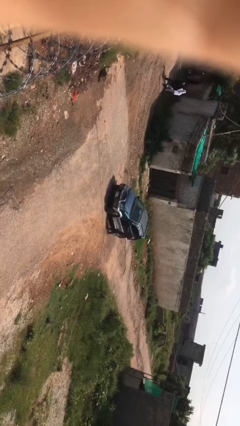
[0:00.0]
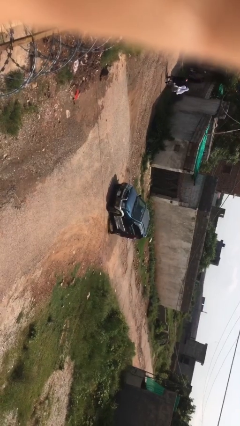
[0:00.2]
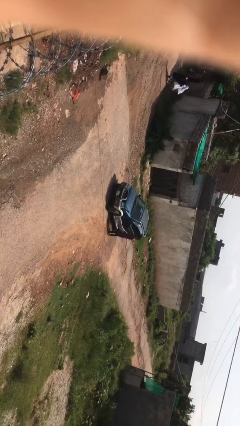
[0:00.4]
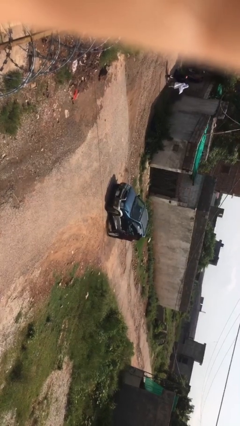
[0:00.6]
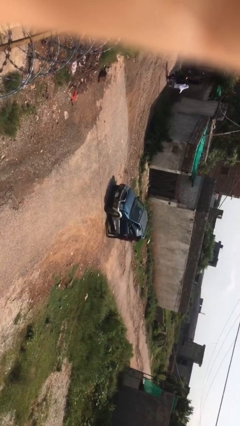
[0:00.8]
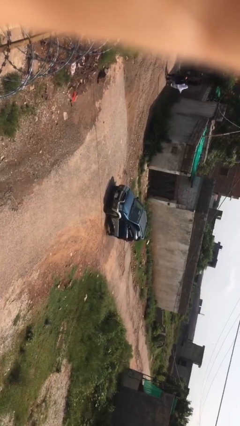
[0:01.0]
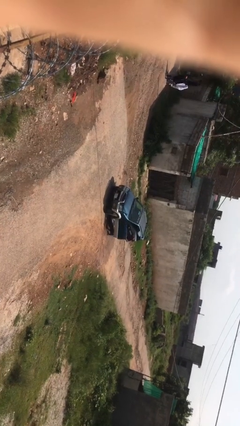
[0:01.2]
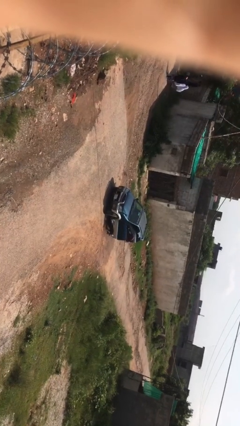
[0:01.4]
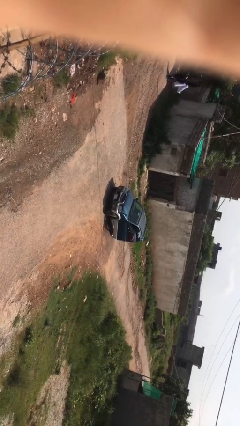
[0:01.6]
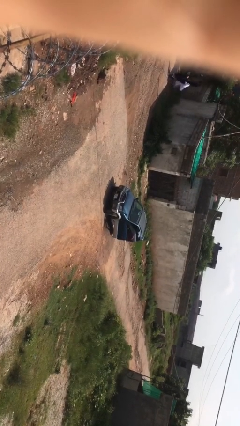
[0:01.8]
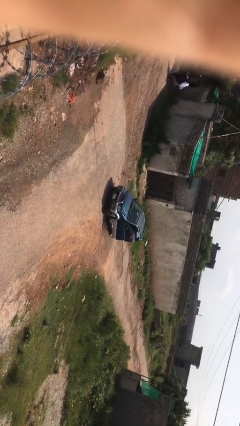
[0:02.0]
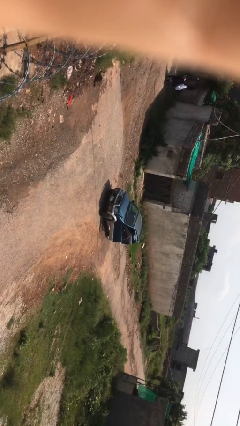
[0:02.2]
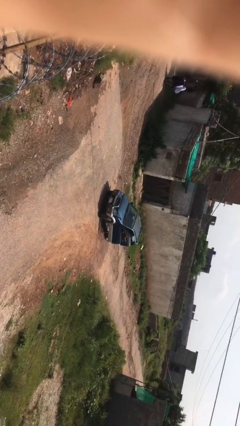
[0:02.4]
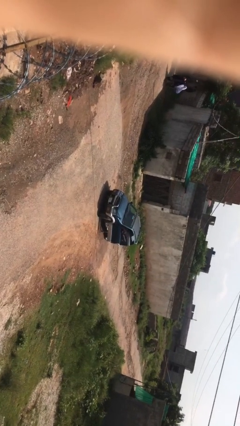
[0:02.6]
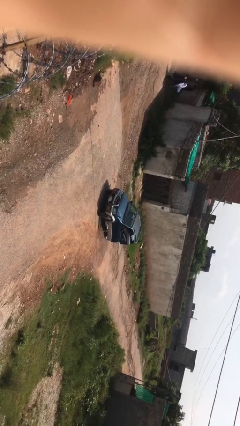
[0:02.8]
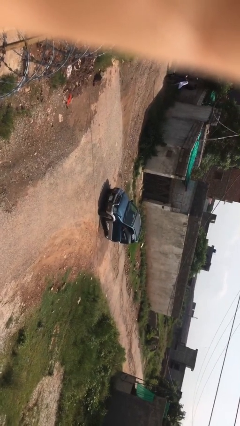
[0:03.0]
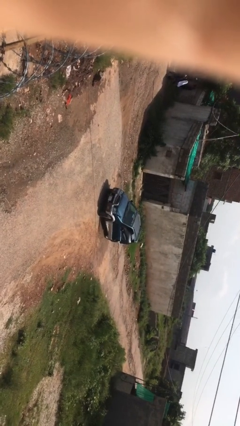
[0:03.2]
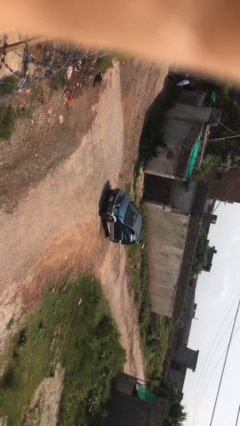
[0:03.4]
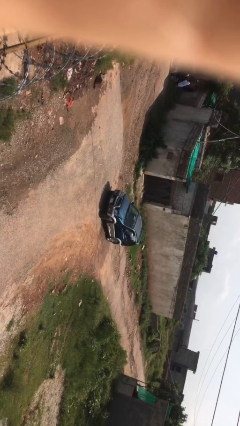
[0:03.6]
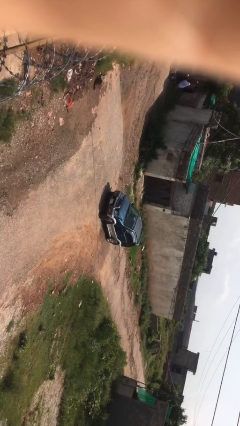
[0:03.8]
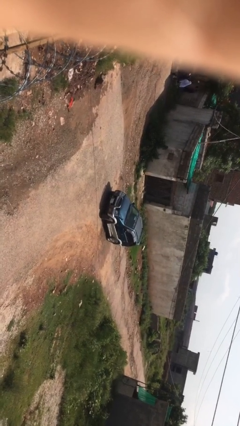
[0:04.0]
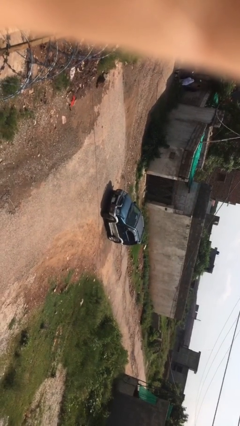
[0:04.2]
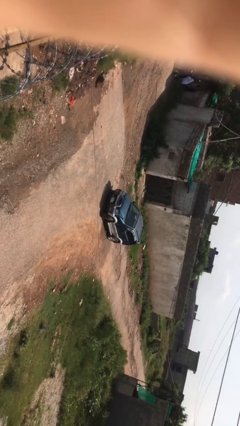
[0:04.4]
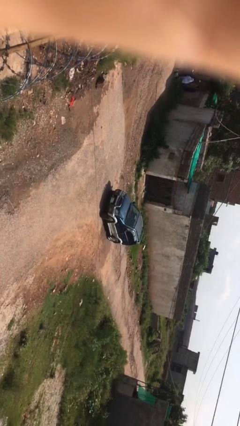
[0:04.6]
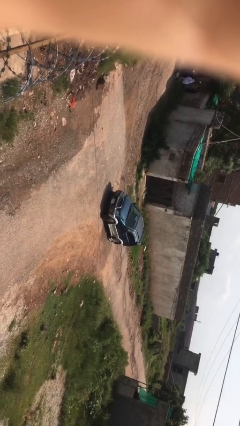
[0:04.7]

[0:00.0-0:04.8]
car picks up person

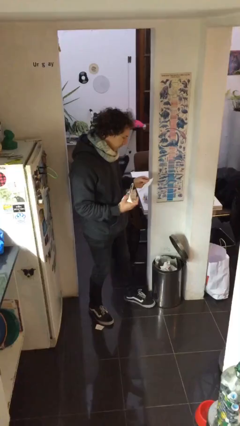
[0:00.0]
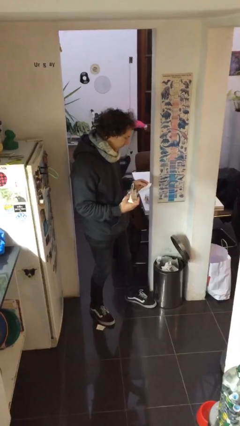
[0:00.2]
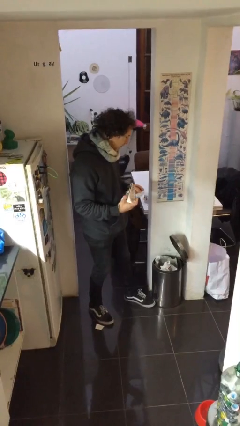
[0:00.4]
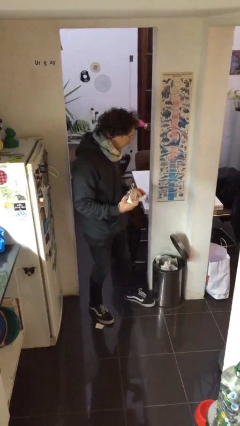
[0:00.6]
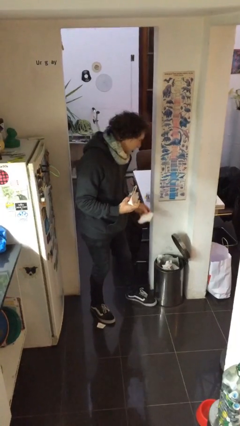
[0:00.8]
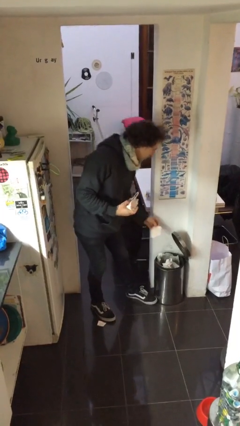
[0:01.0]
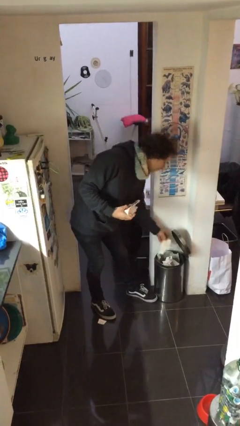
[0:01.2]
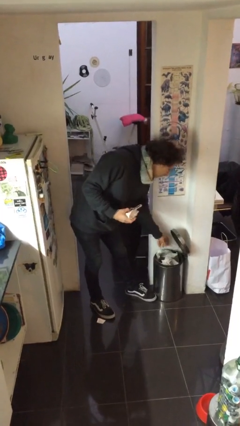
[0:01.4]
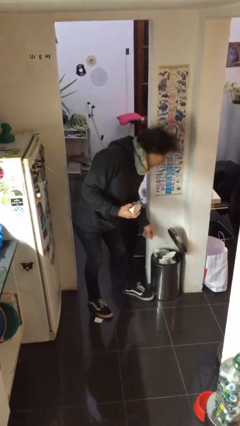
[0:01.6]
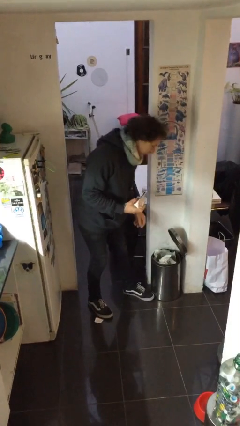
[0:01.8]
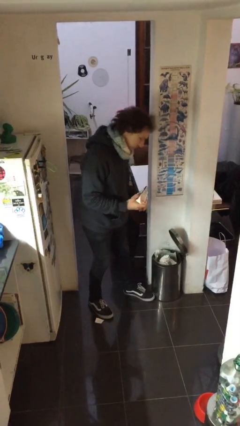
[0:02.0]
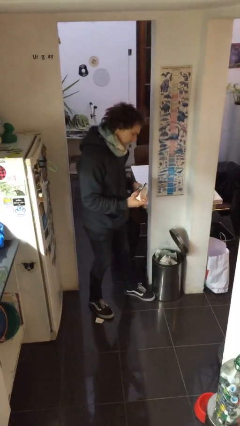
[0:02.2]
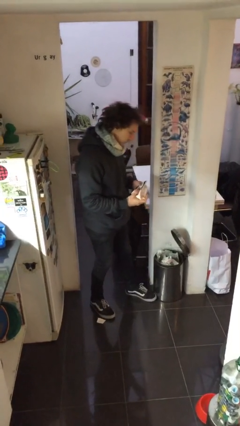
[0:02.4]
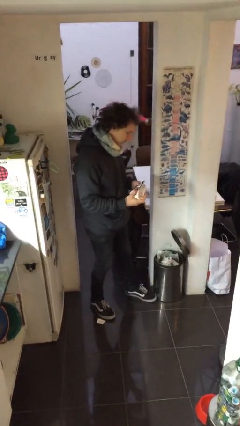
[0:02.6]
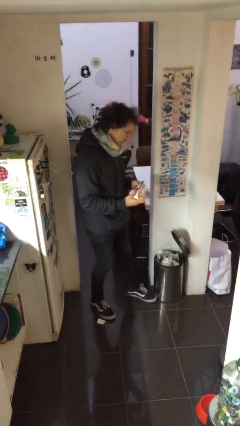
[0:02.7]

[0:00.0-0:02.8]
person discards trash

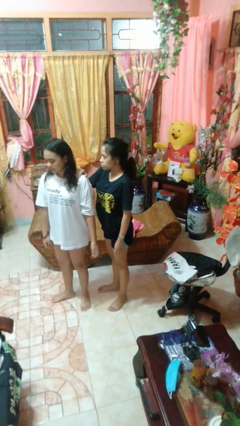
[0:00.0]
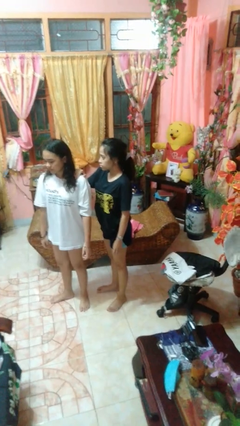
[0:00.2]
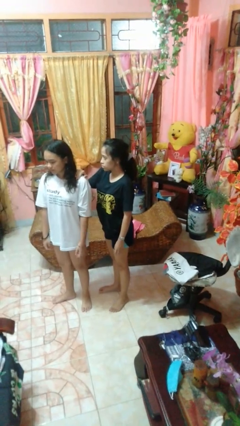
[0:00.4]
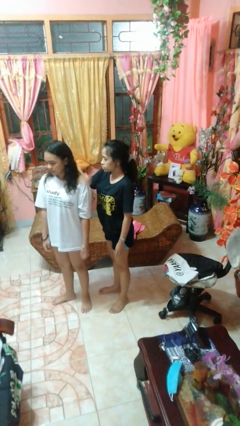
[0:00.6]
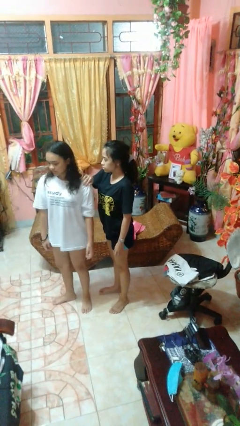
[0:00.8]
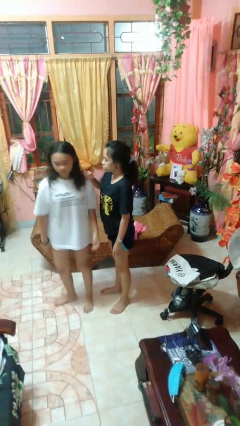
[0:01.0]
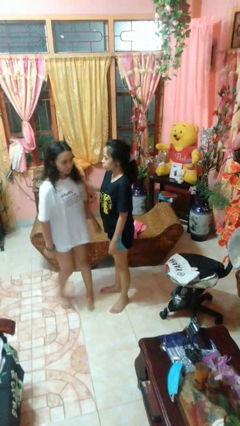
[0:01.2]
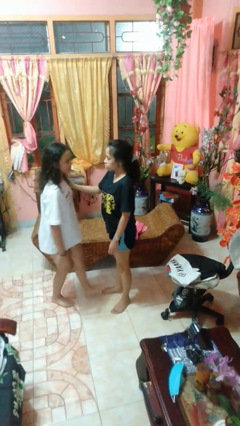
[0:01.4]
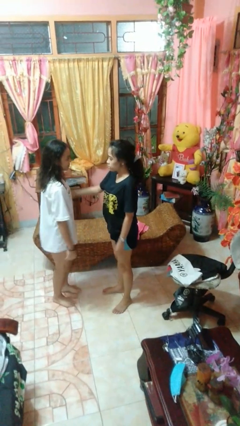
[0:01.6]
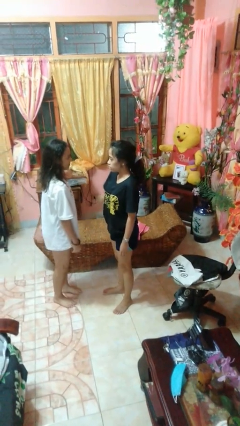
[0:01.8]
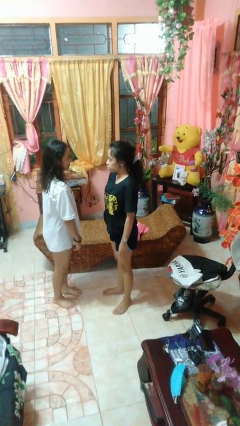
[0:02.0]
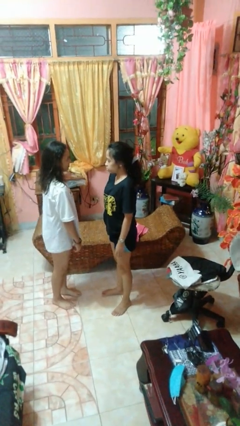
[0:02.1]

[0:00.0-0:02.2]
person spins person around

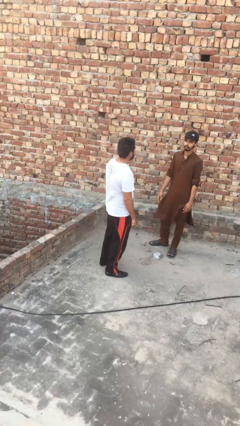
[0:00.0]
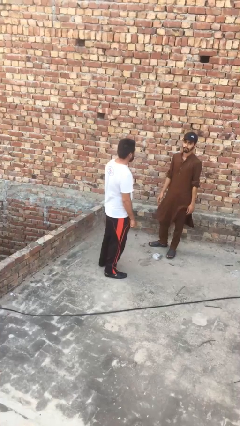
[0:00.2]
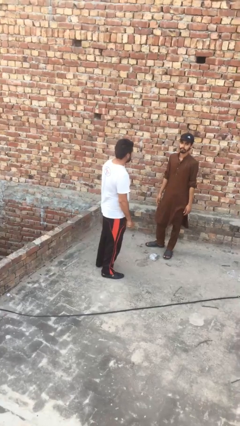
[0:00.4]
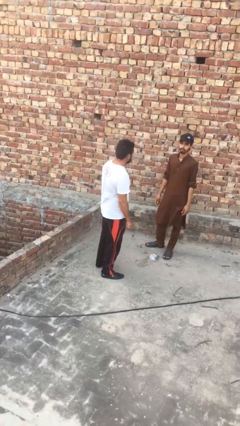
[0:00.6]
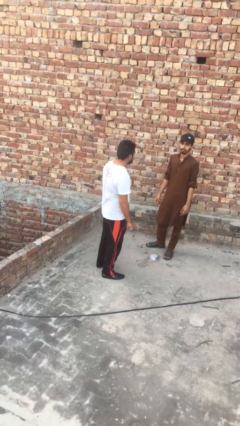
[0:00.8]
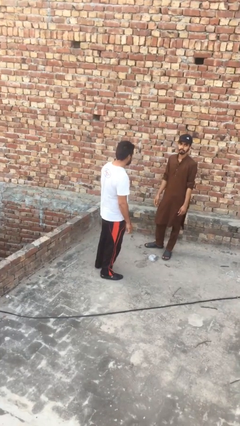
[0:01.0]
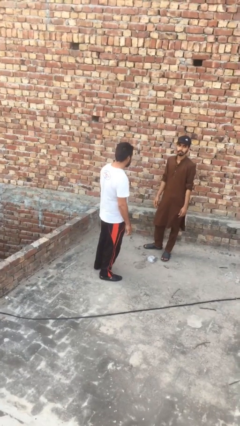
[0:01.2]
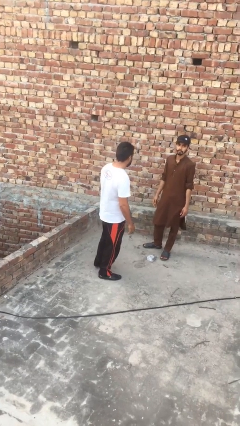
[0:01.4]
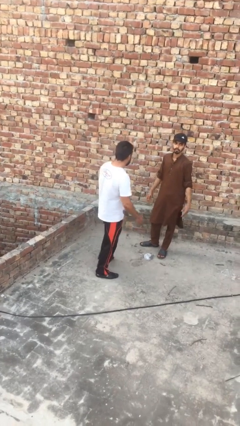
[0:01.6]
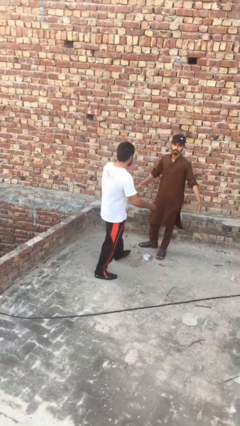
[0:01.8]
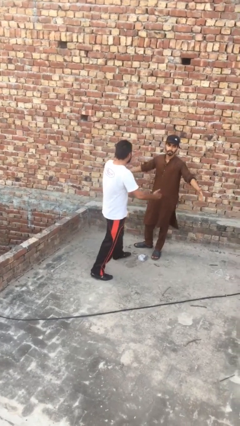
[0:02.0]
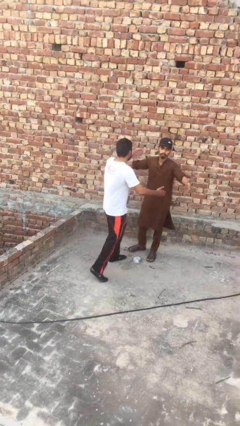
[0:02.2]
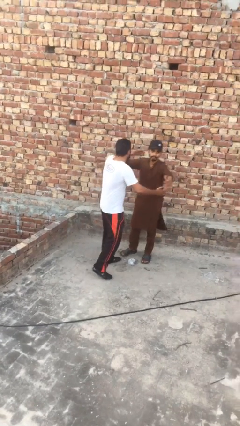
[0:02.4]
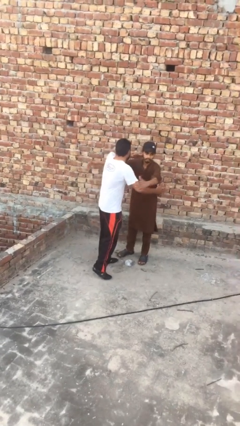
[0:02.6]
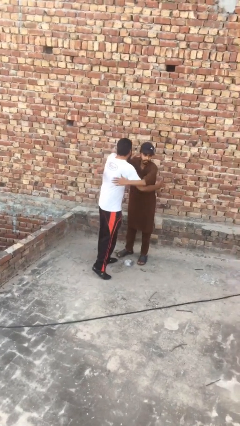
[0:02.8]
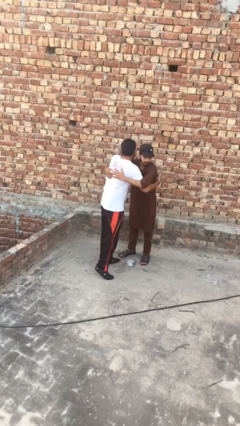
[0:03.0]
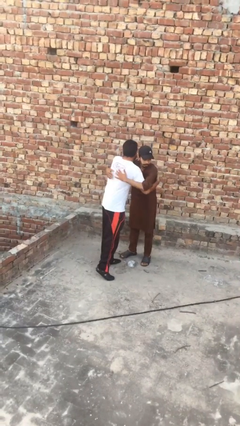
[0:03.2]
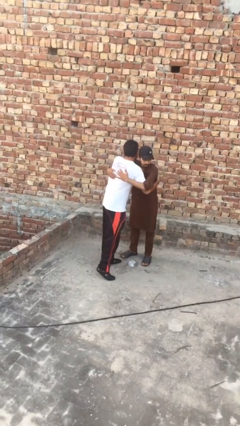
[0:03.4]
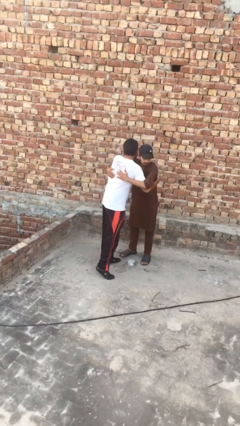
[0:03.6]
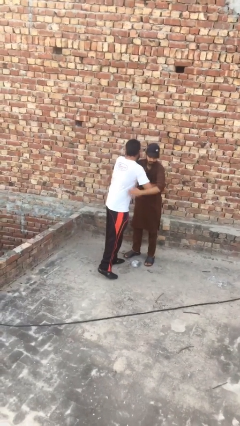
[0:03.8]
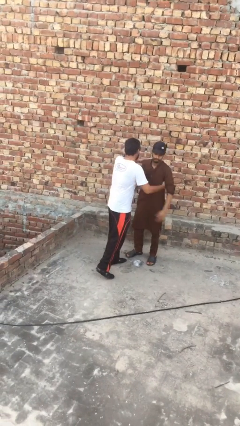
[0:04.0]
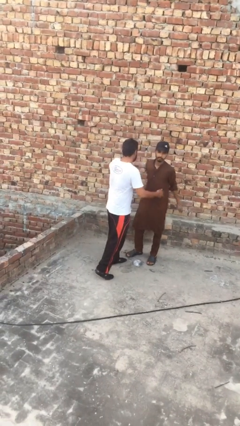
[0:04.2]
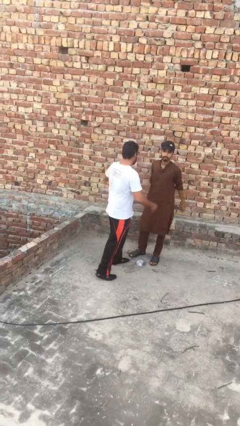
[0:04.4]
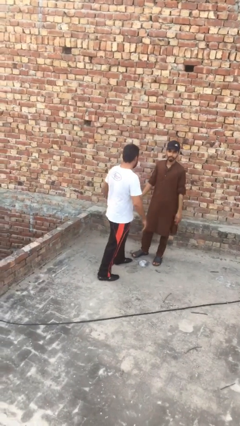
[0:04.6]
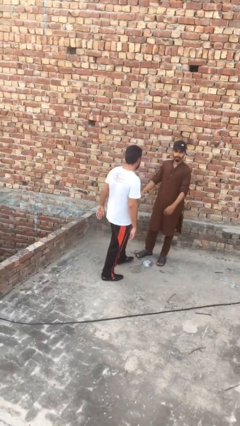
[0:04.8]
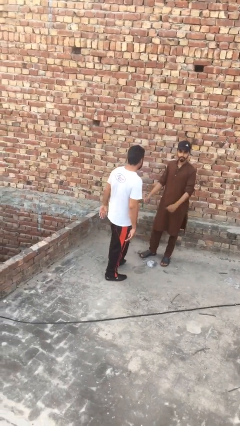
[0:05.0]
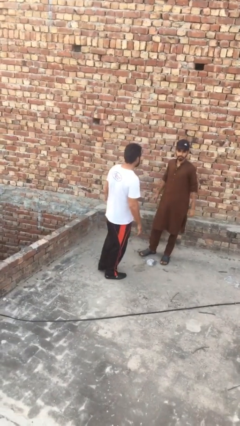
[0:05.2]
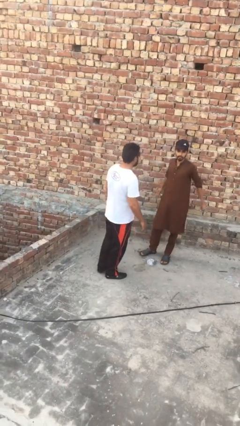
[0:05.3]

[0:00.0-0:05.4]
person embraces person

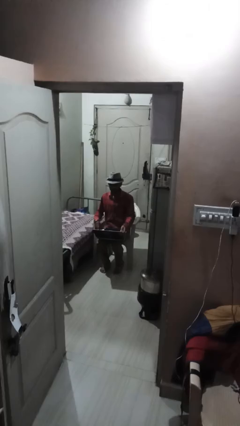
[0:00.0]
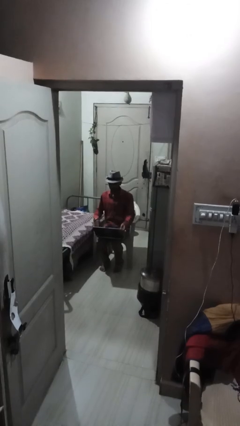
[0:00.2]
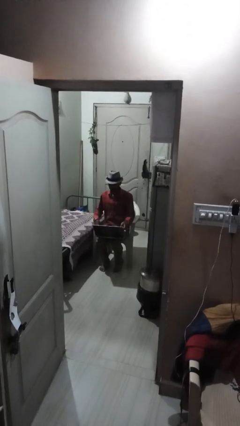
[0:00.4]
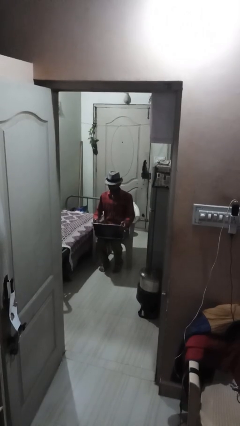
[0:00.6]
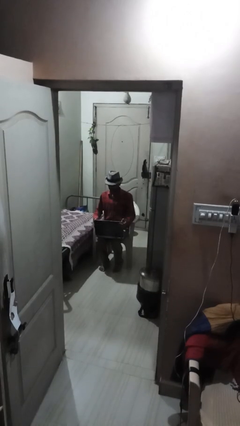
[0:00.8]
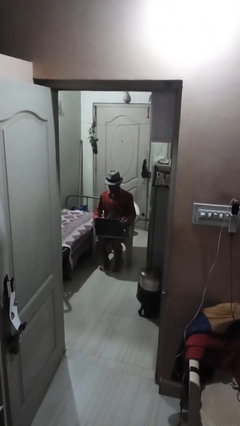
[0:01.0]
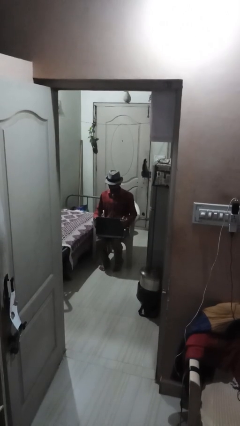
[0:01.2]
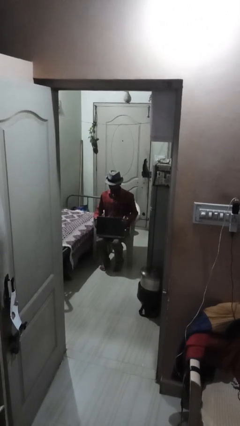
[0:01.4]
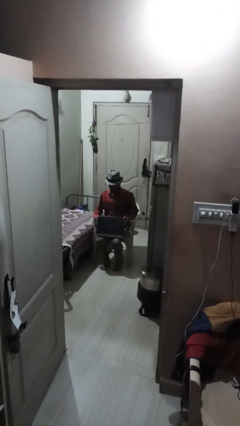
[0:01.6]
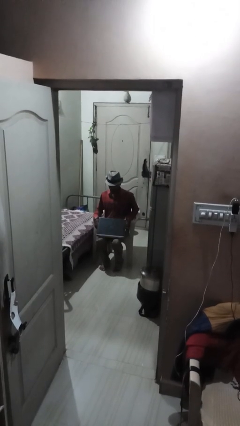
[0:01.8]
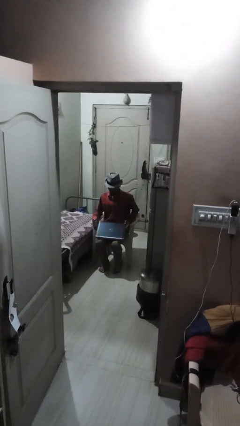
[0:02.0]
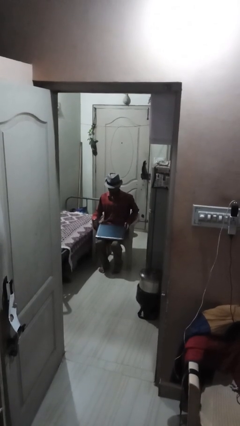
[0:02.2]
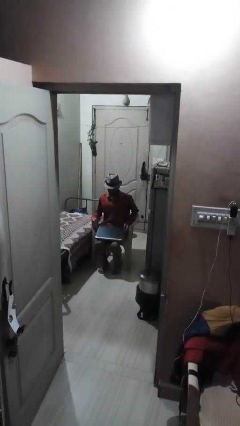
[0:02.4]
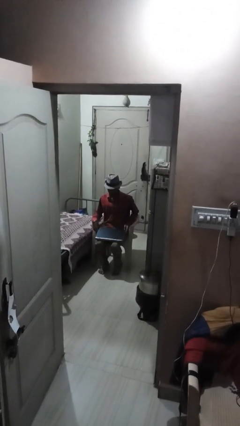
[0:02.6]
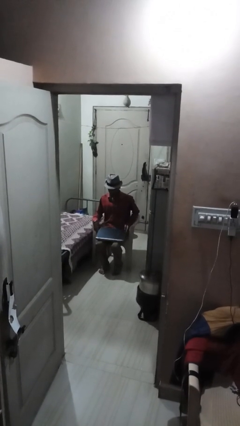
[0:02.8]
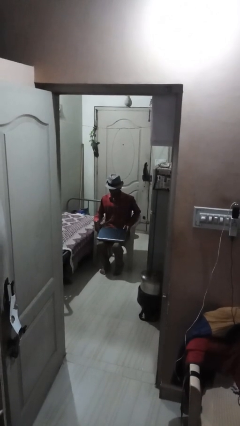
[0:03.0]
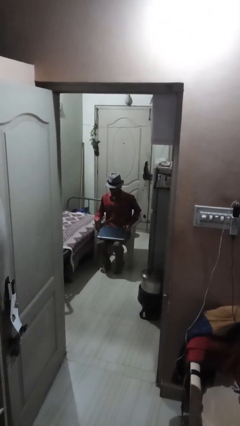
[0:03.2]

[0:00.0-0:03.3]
person closes laptop
